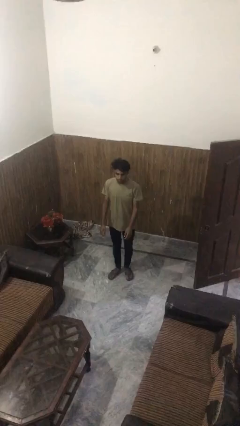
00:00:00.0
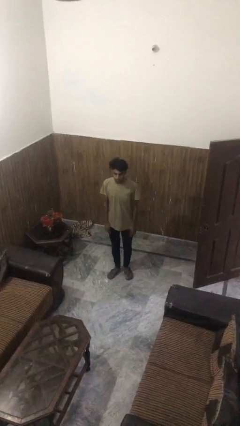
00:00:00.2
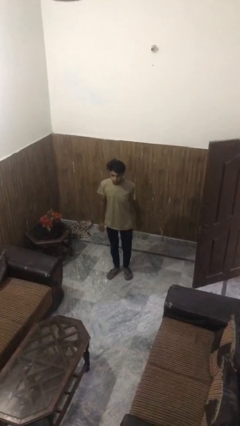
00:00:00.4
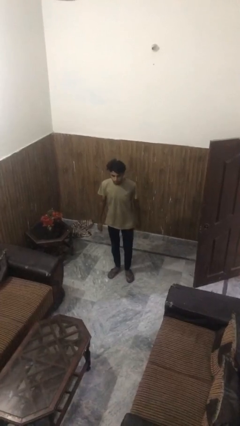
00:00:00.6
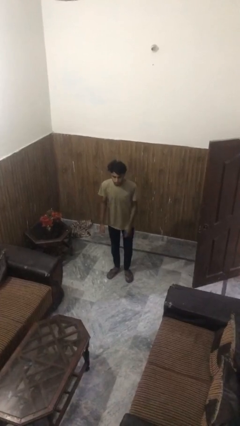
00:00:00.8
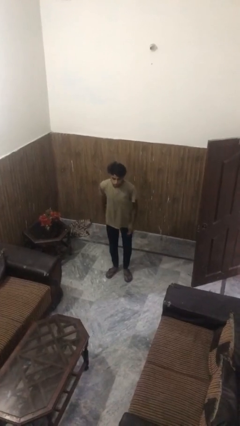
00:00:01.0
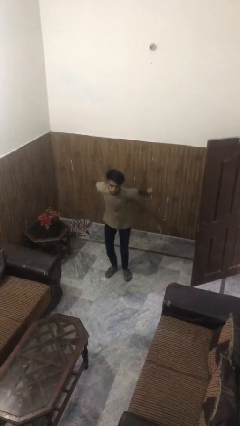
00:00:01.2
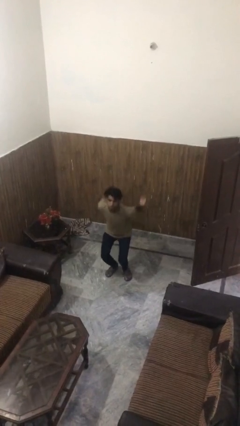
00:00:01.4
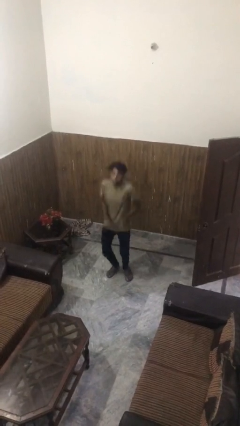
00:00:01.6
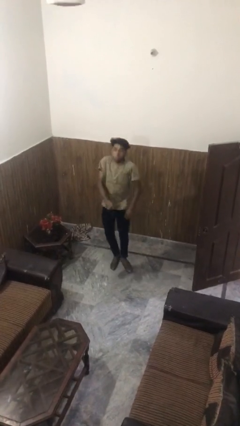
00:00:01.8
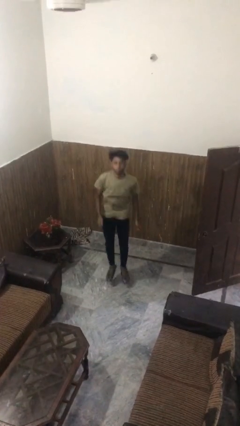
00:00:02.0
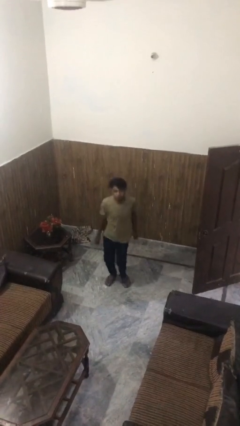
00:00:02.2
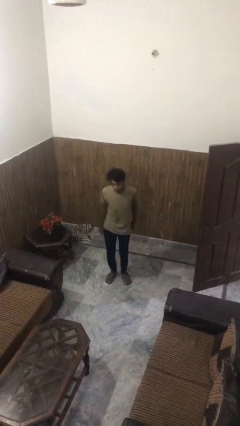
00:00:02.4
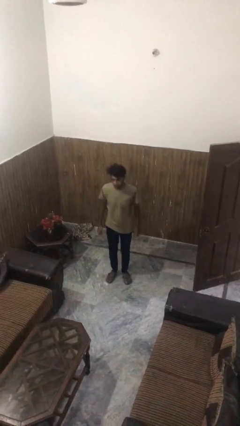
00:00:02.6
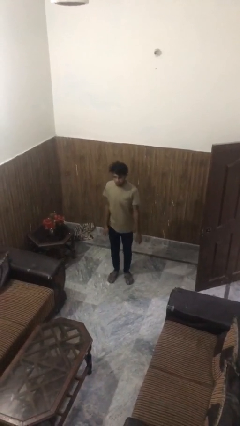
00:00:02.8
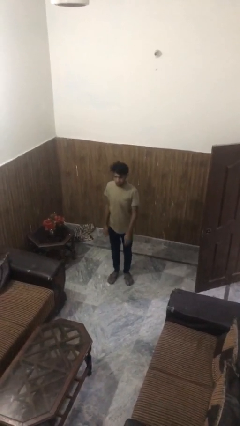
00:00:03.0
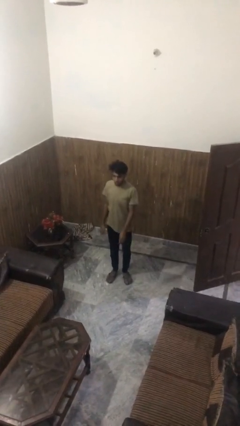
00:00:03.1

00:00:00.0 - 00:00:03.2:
person jumps

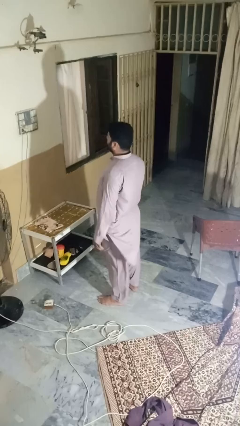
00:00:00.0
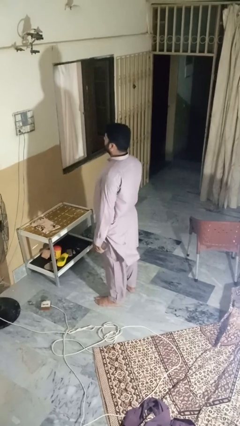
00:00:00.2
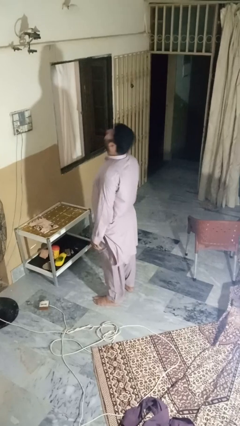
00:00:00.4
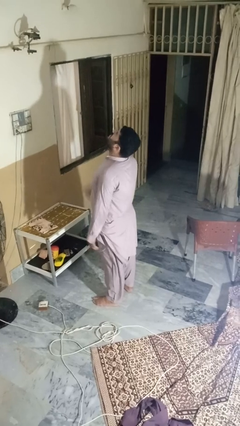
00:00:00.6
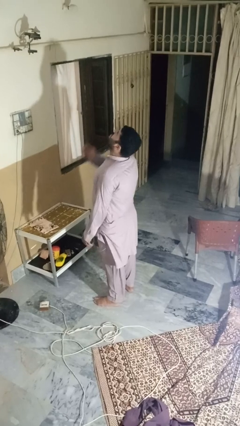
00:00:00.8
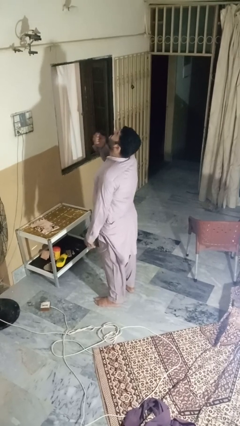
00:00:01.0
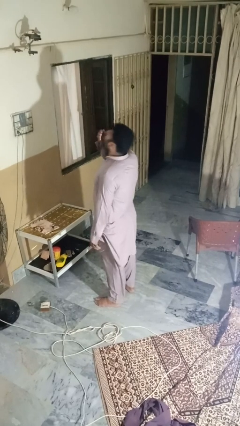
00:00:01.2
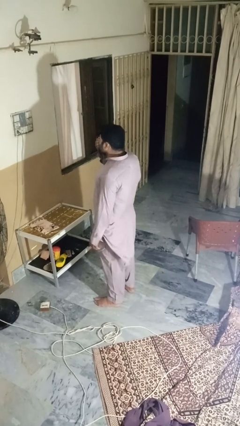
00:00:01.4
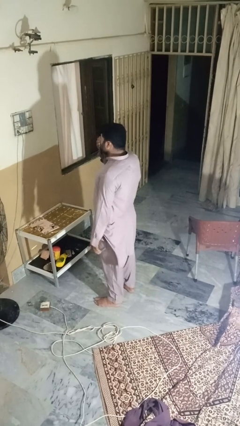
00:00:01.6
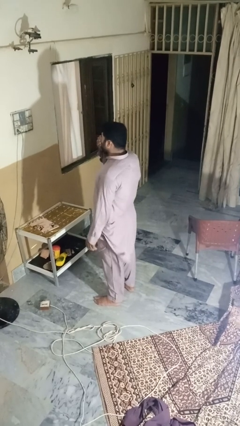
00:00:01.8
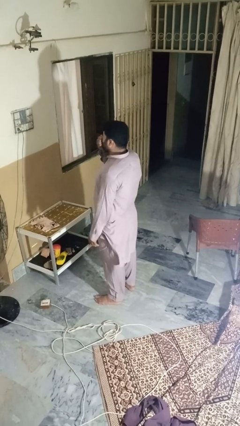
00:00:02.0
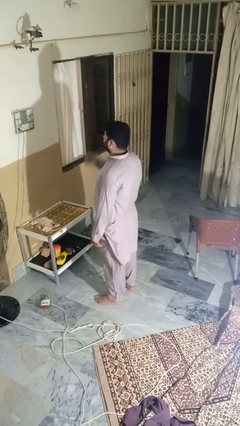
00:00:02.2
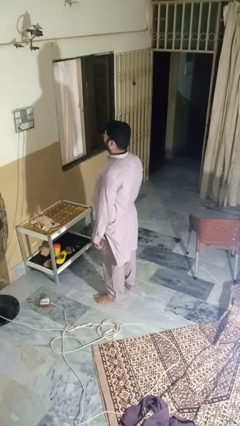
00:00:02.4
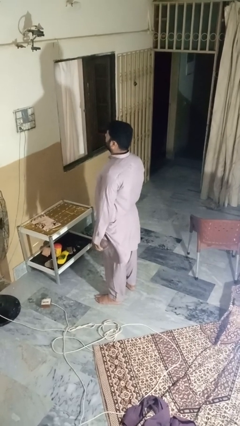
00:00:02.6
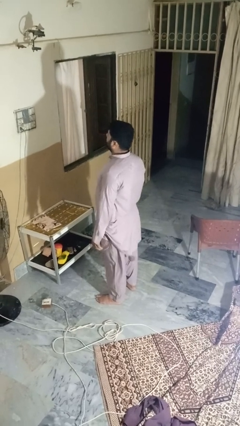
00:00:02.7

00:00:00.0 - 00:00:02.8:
person sneezes into hand

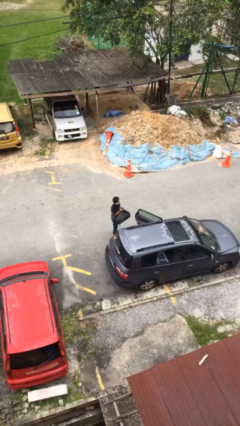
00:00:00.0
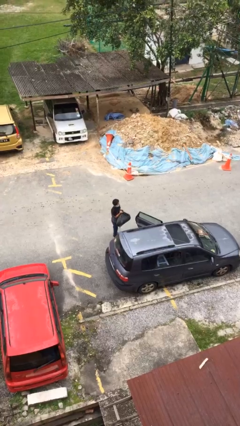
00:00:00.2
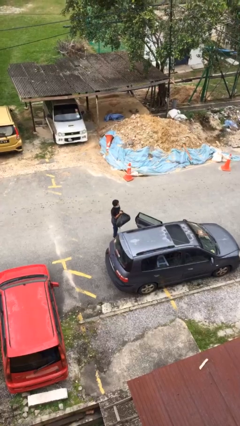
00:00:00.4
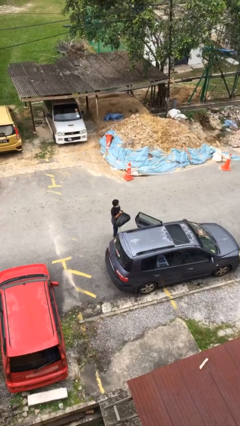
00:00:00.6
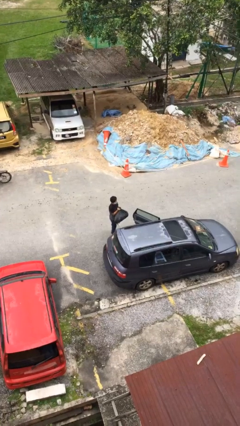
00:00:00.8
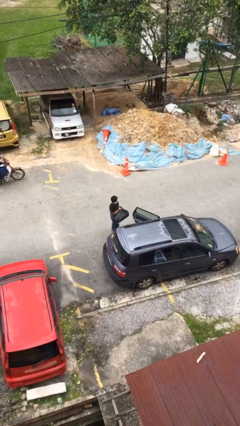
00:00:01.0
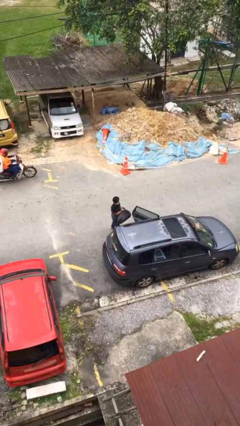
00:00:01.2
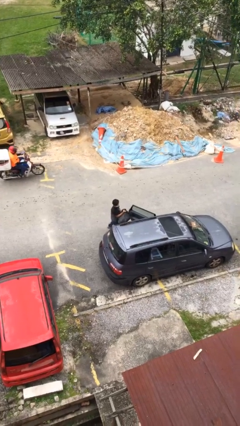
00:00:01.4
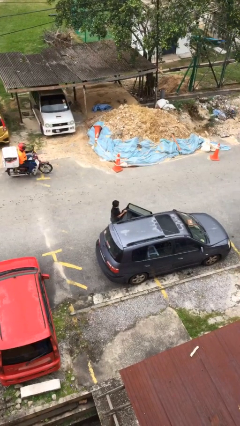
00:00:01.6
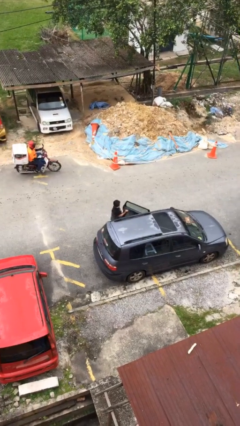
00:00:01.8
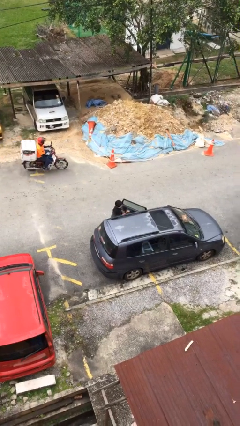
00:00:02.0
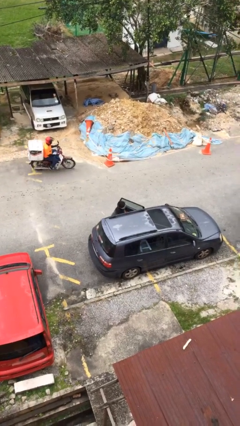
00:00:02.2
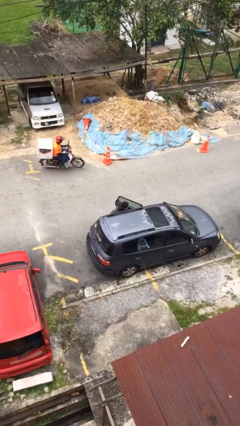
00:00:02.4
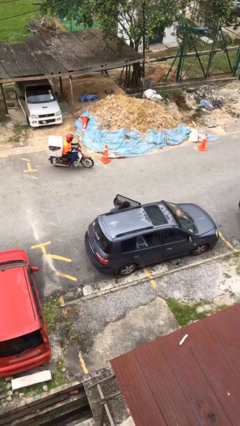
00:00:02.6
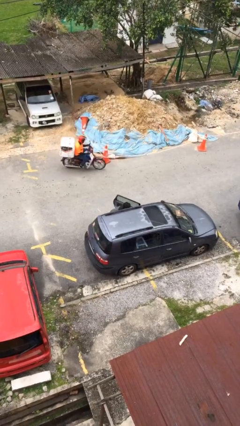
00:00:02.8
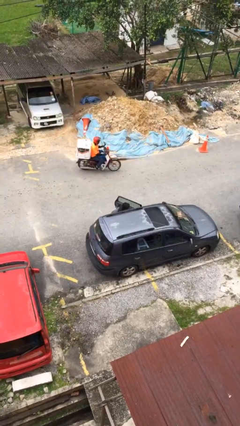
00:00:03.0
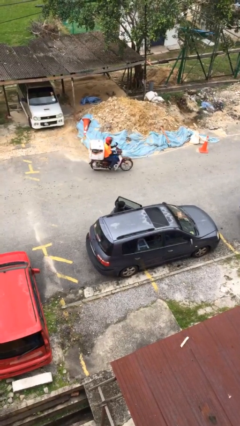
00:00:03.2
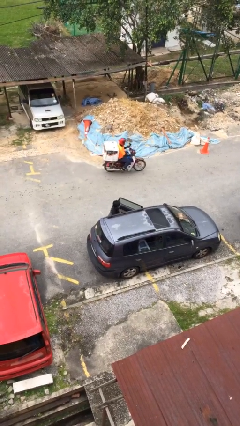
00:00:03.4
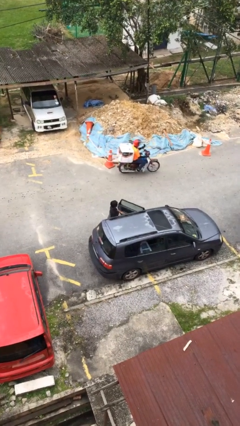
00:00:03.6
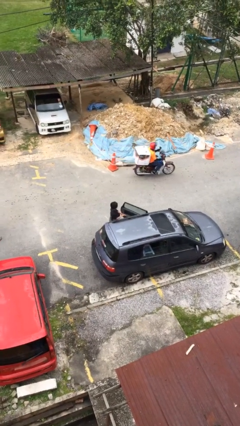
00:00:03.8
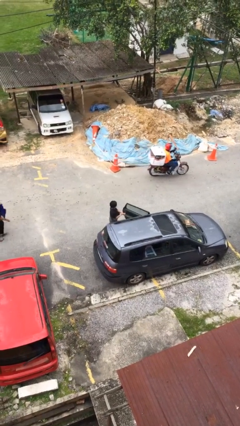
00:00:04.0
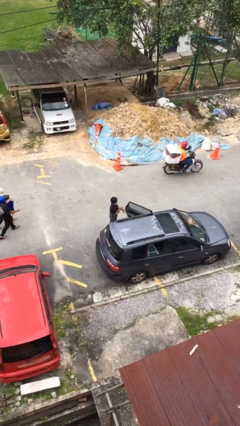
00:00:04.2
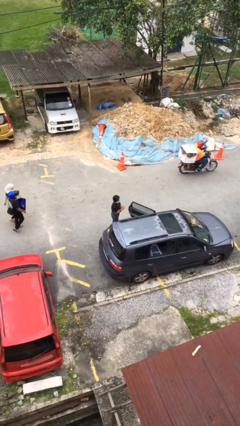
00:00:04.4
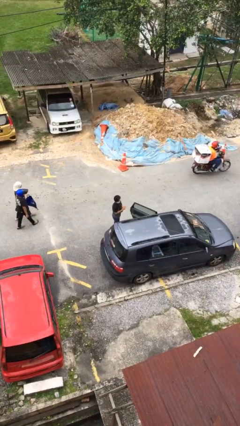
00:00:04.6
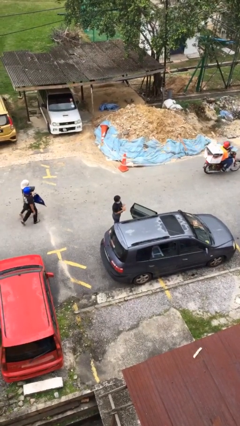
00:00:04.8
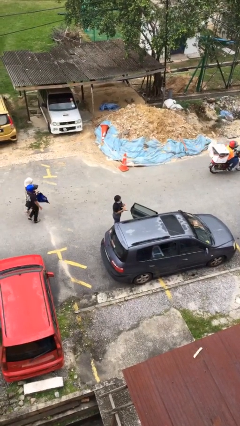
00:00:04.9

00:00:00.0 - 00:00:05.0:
person loads car

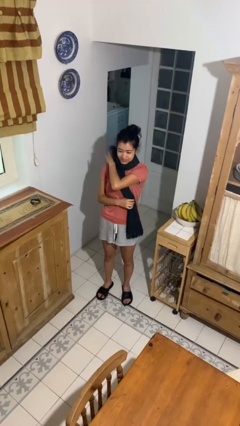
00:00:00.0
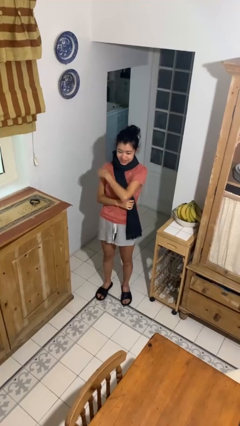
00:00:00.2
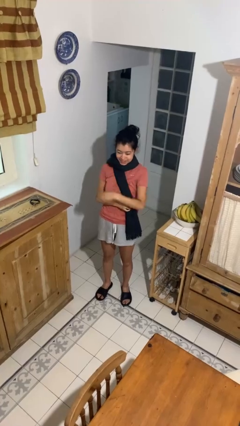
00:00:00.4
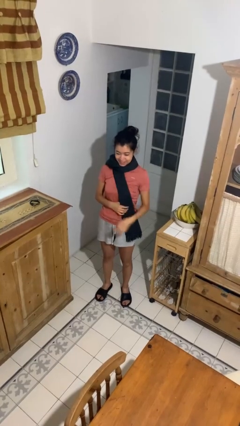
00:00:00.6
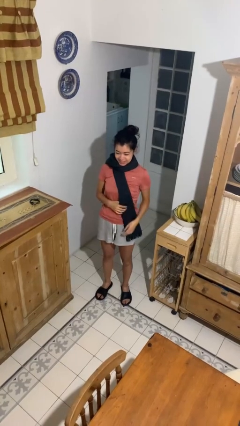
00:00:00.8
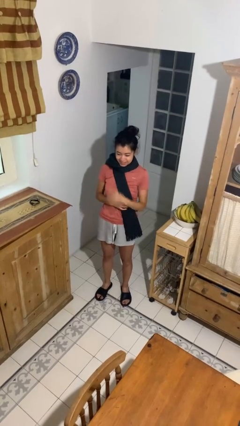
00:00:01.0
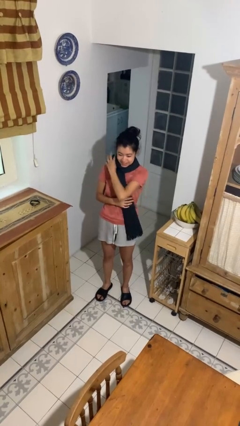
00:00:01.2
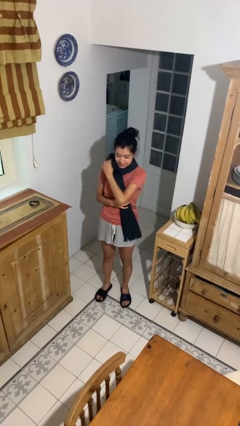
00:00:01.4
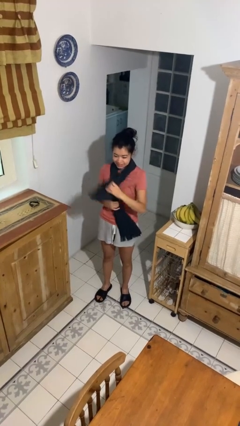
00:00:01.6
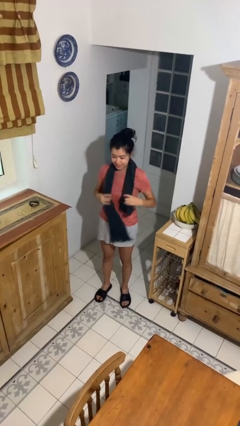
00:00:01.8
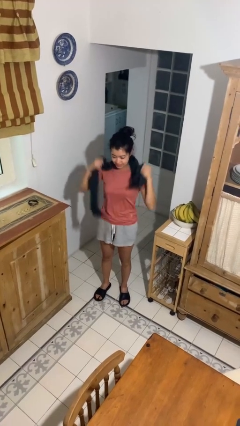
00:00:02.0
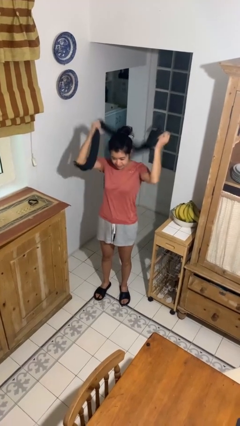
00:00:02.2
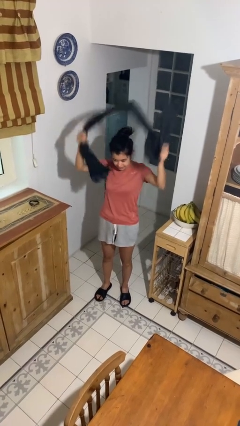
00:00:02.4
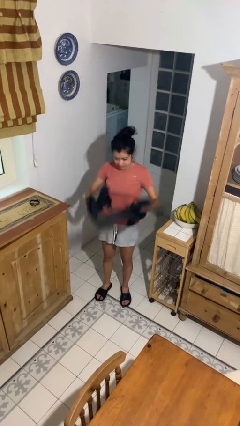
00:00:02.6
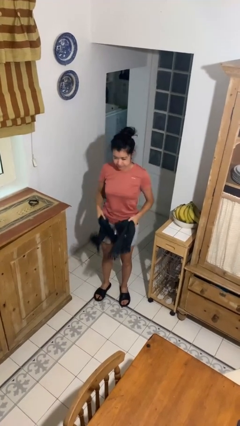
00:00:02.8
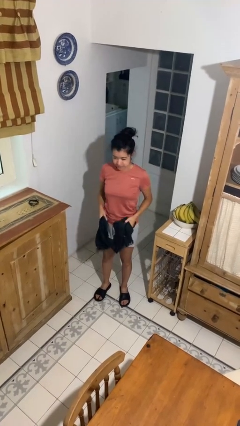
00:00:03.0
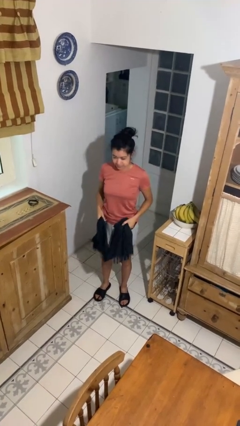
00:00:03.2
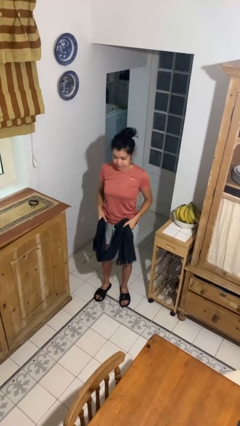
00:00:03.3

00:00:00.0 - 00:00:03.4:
person takes off scarf

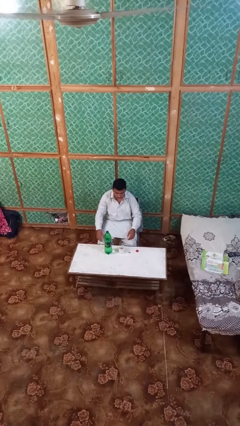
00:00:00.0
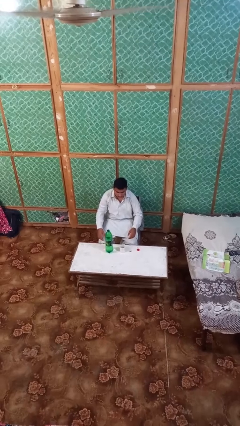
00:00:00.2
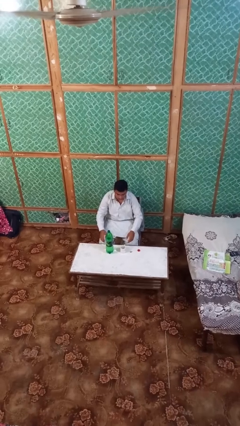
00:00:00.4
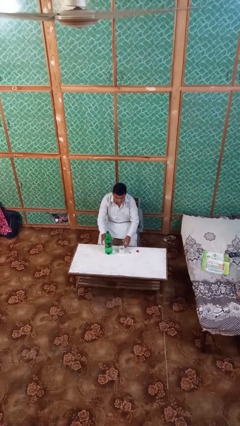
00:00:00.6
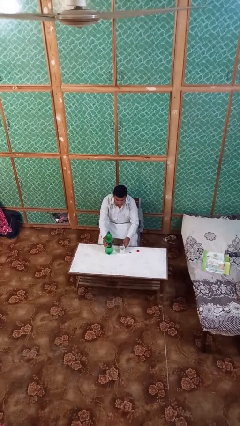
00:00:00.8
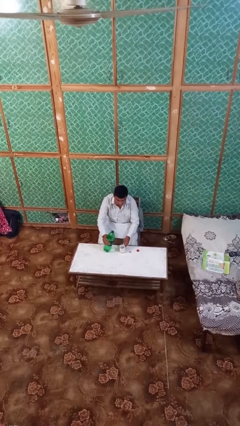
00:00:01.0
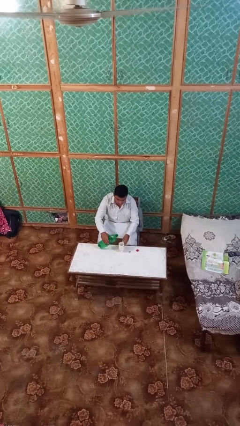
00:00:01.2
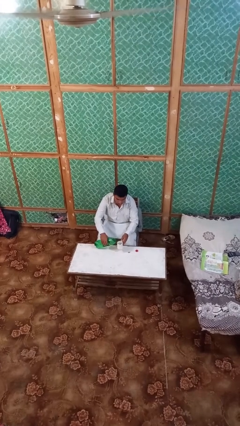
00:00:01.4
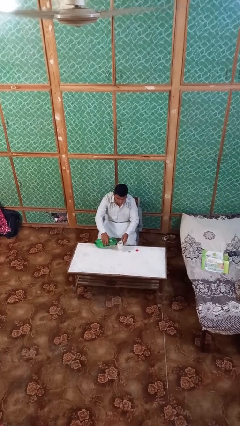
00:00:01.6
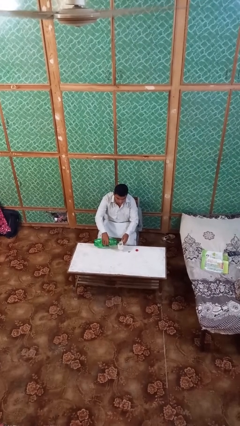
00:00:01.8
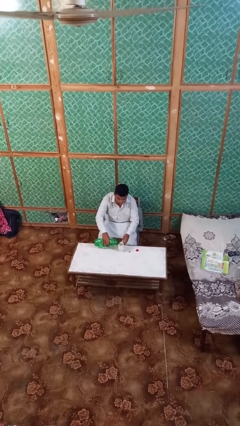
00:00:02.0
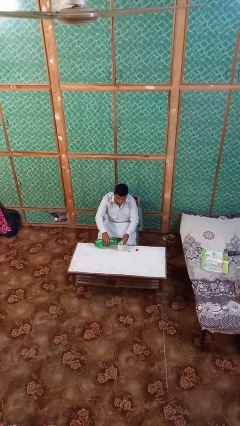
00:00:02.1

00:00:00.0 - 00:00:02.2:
person pours liquid into cup

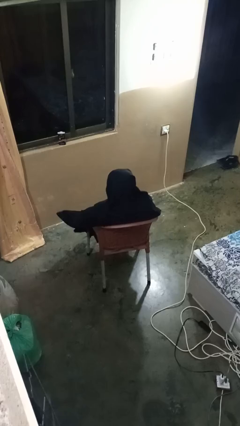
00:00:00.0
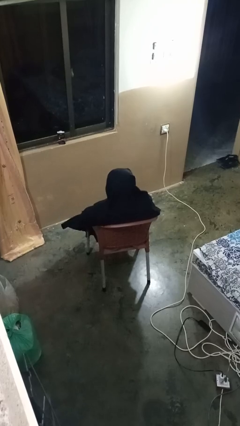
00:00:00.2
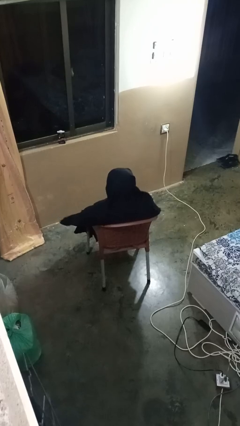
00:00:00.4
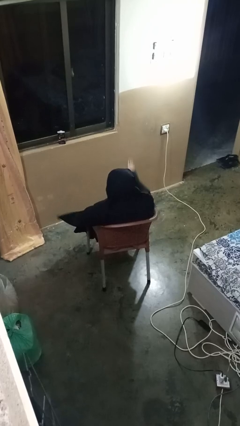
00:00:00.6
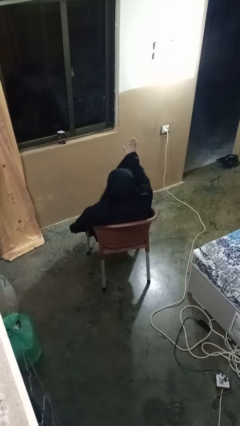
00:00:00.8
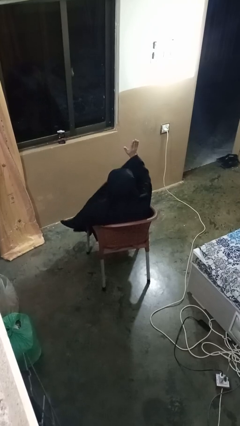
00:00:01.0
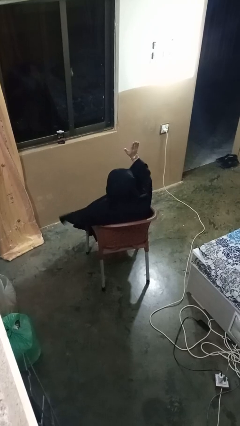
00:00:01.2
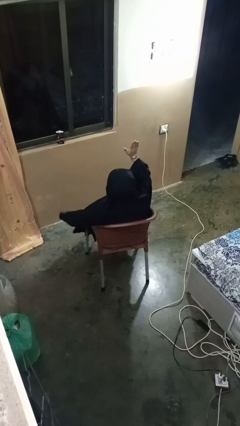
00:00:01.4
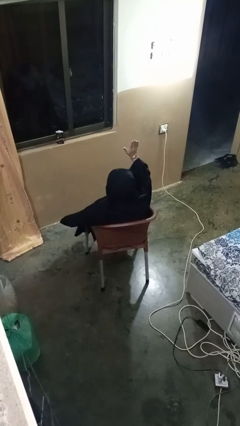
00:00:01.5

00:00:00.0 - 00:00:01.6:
person gestures raise hand
